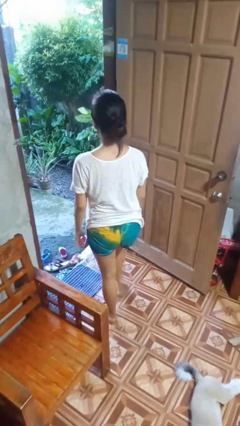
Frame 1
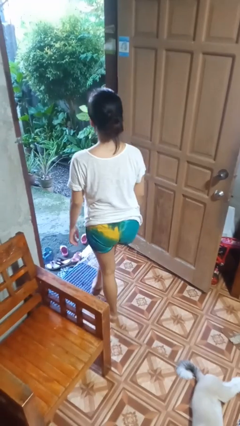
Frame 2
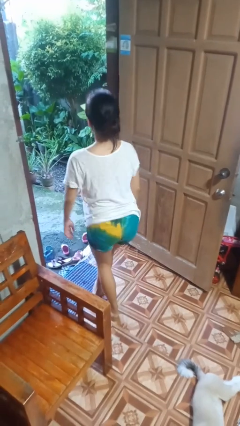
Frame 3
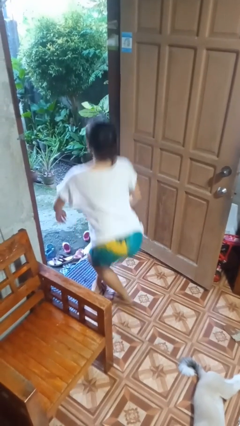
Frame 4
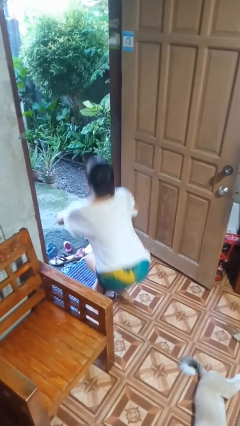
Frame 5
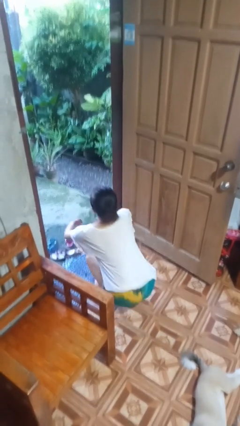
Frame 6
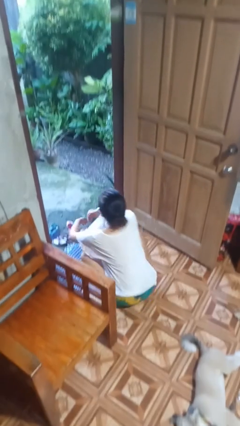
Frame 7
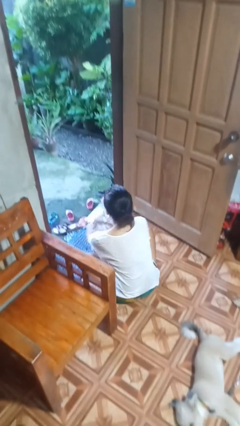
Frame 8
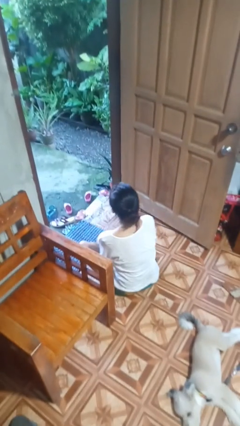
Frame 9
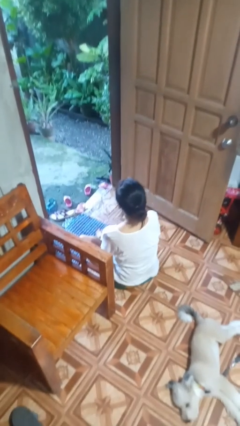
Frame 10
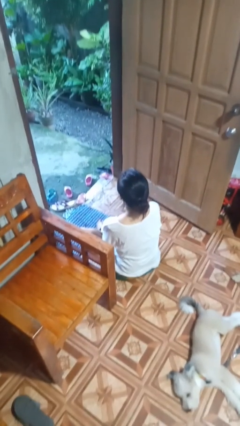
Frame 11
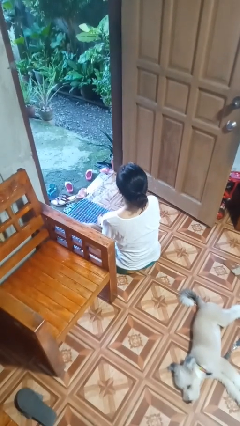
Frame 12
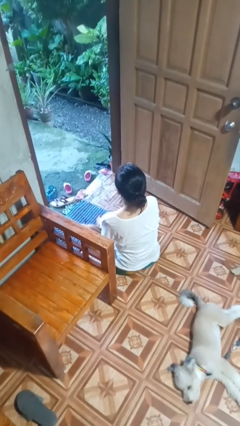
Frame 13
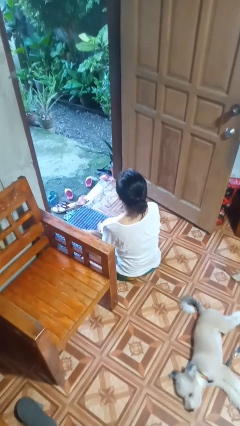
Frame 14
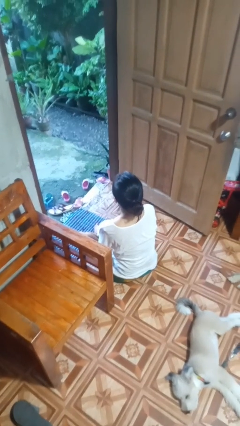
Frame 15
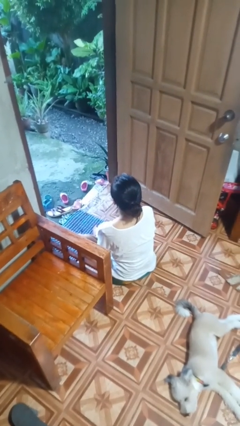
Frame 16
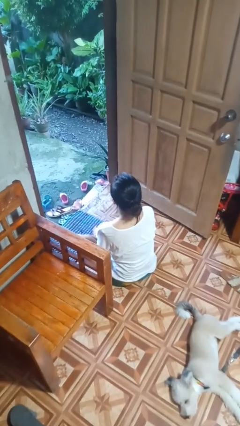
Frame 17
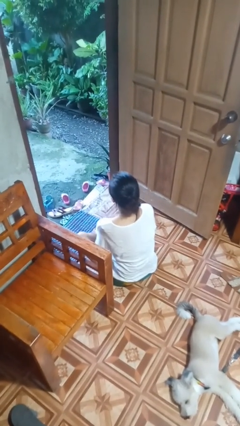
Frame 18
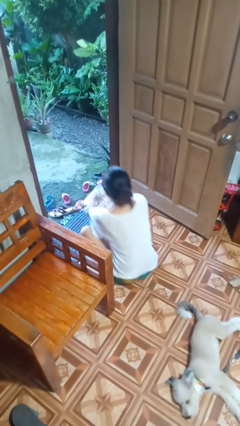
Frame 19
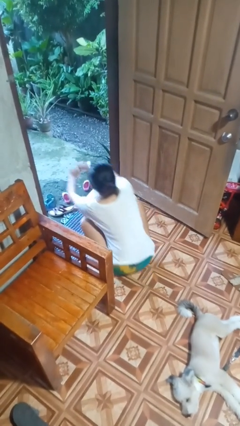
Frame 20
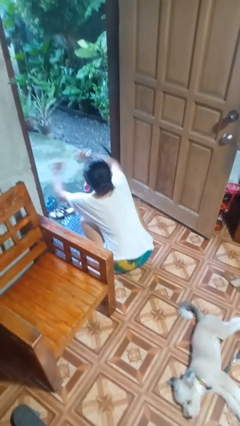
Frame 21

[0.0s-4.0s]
person sits crisscross

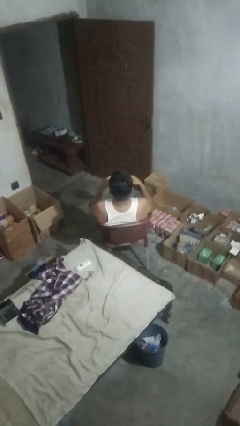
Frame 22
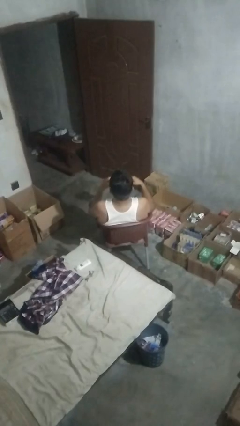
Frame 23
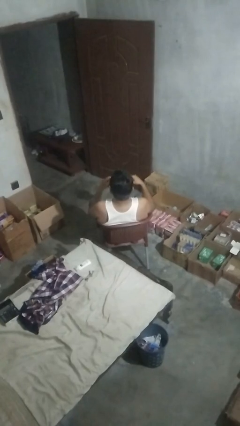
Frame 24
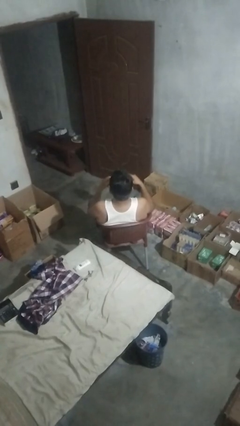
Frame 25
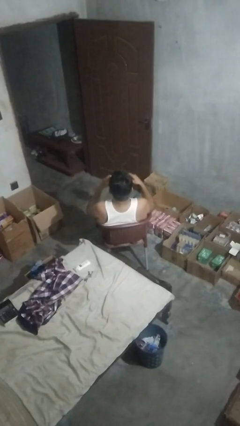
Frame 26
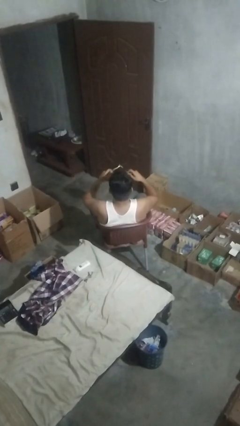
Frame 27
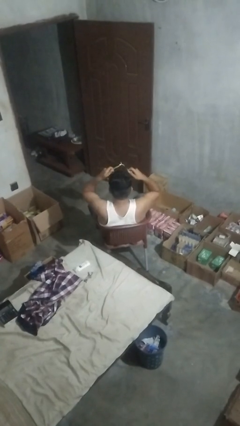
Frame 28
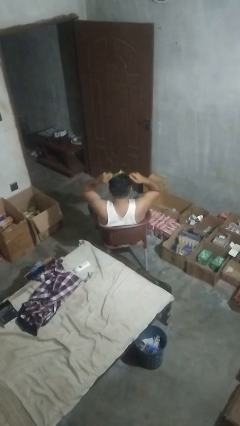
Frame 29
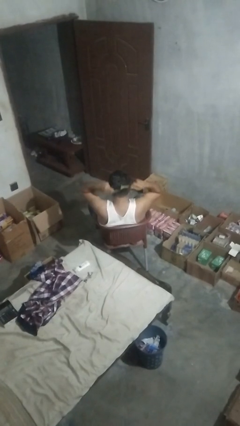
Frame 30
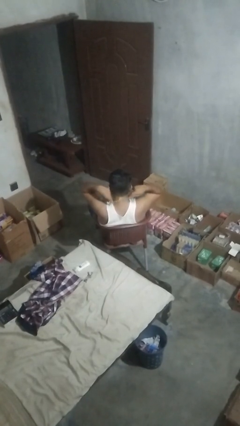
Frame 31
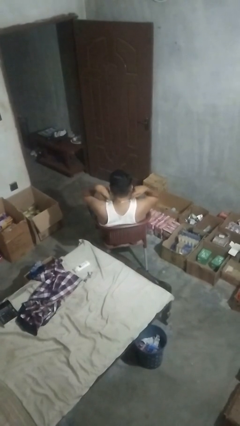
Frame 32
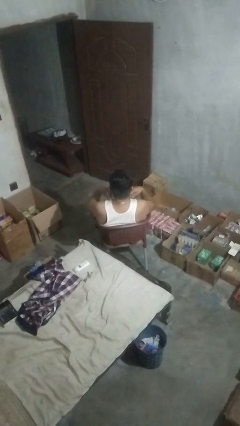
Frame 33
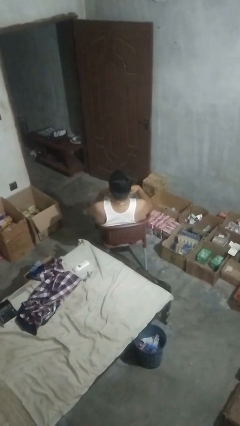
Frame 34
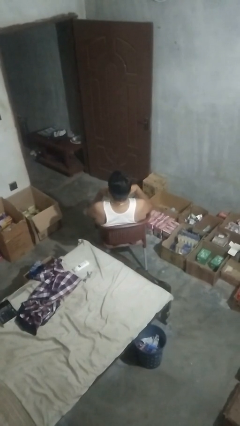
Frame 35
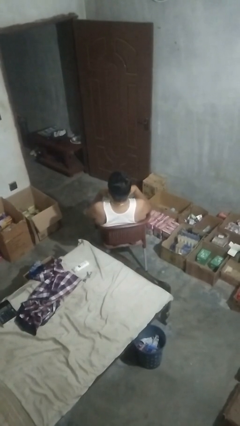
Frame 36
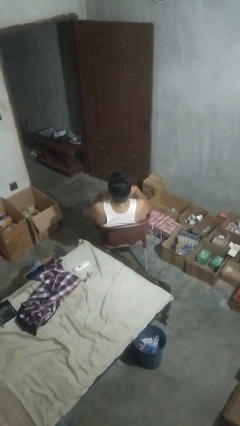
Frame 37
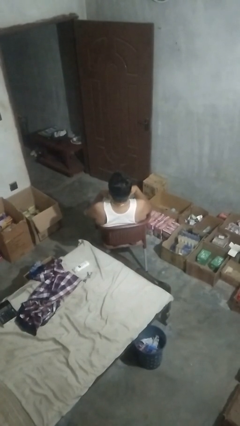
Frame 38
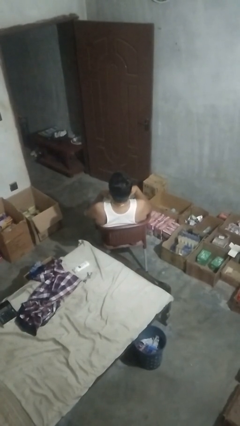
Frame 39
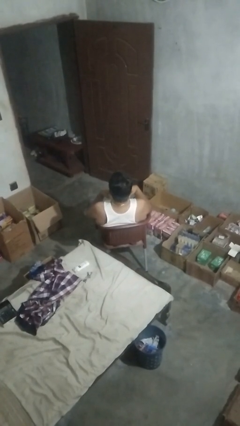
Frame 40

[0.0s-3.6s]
person puts on necklace

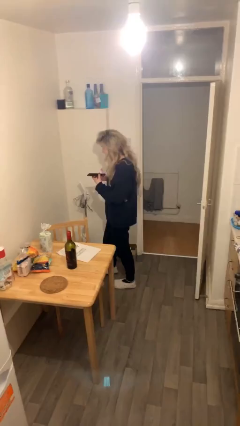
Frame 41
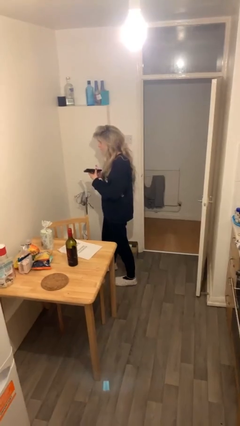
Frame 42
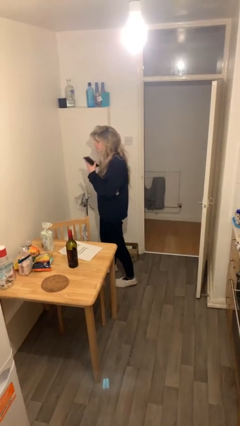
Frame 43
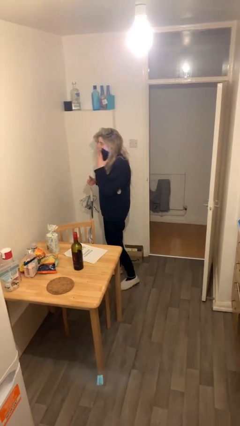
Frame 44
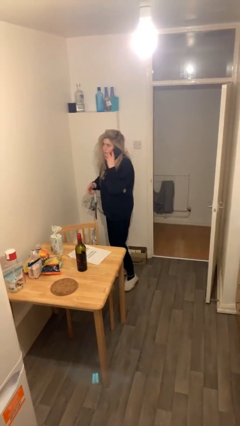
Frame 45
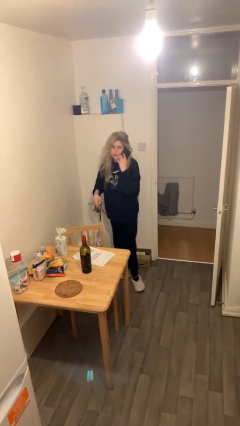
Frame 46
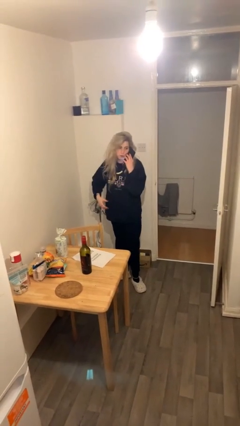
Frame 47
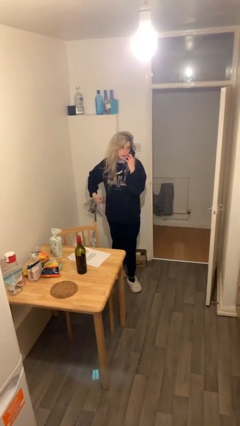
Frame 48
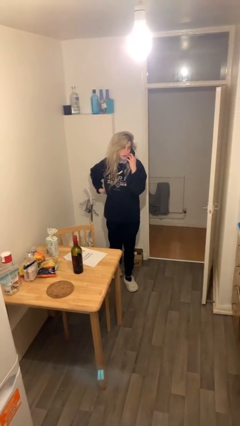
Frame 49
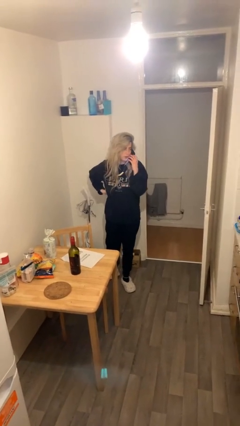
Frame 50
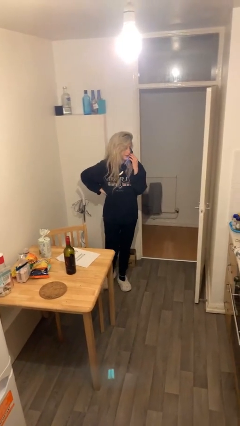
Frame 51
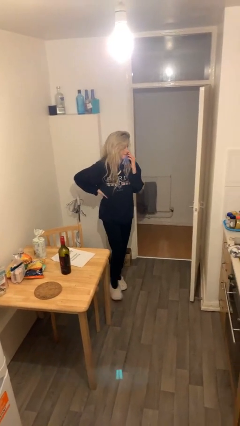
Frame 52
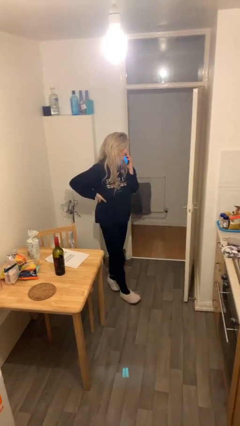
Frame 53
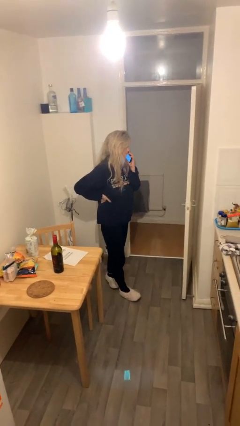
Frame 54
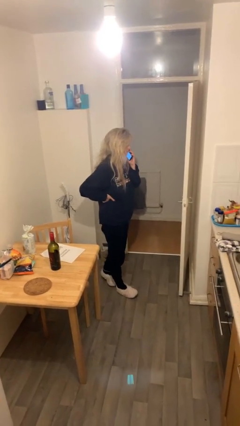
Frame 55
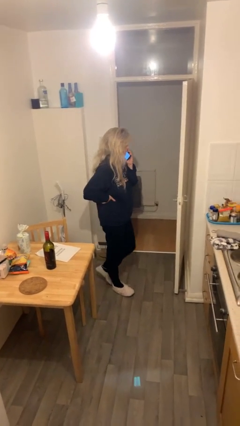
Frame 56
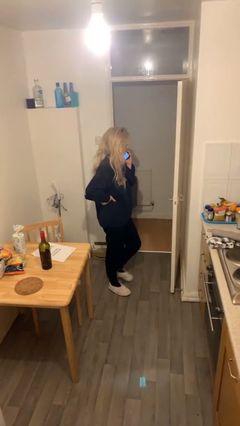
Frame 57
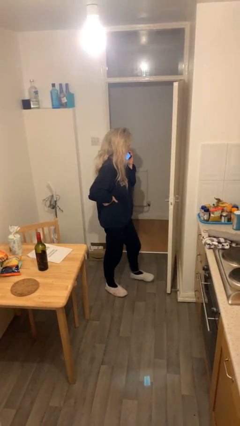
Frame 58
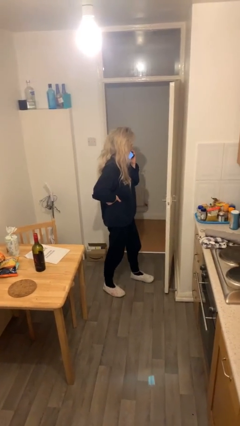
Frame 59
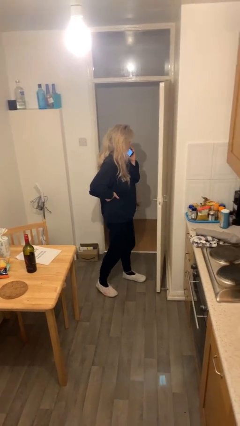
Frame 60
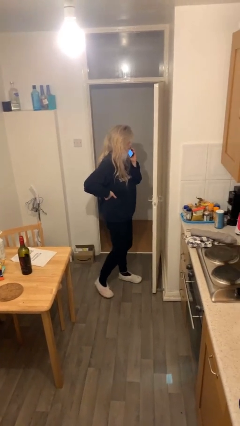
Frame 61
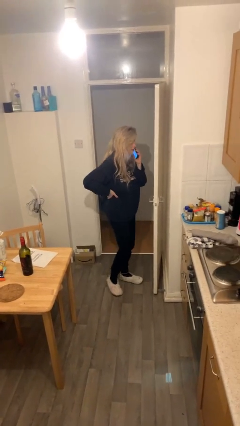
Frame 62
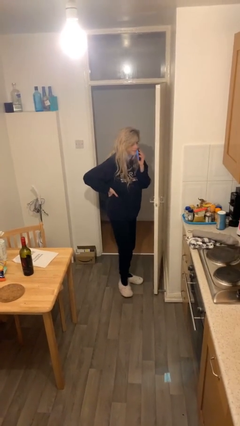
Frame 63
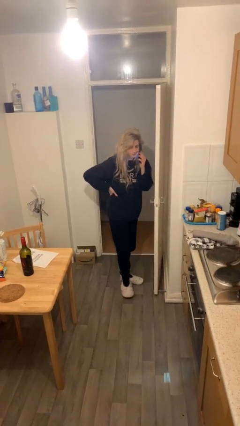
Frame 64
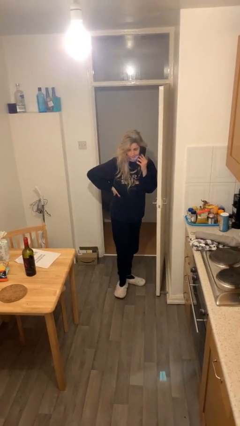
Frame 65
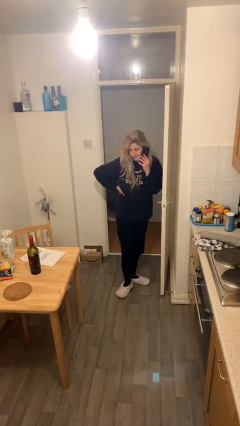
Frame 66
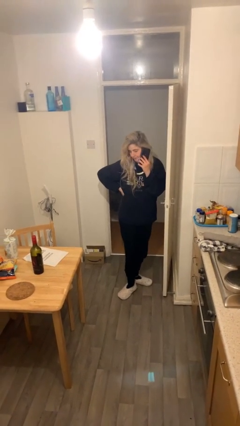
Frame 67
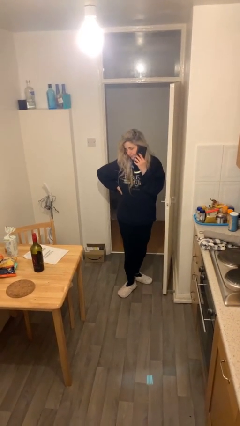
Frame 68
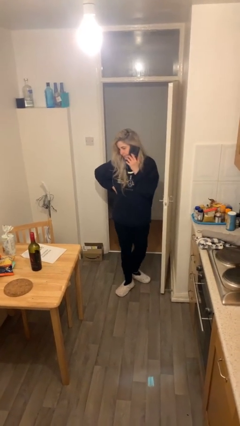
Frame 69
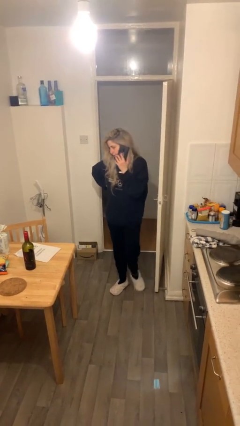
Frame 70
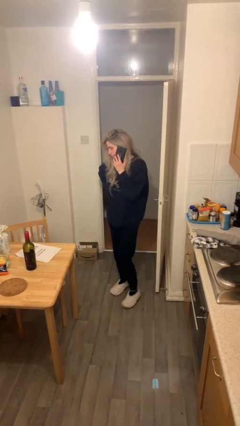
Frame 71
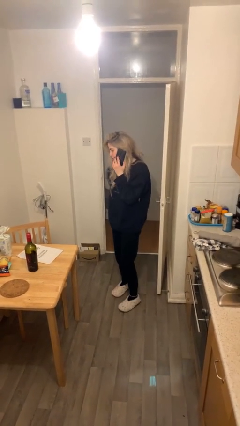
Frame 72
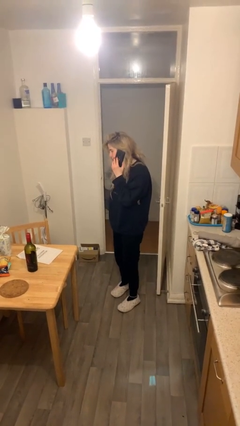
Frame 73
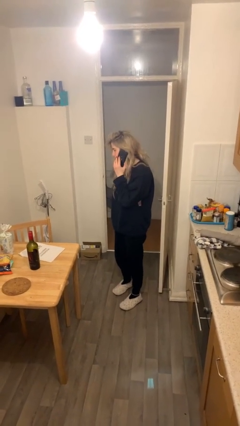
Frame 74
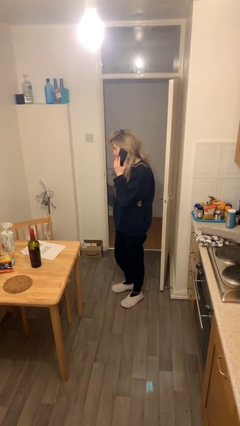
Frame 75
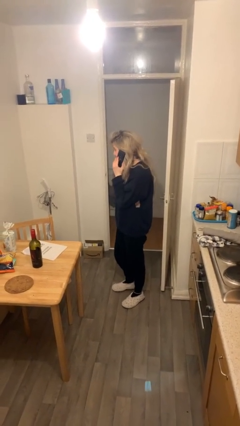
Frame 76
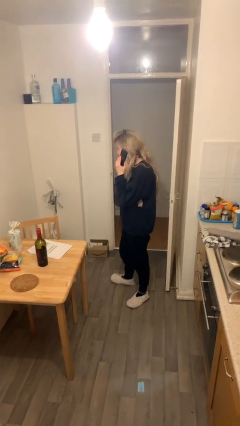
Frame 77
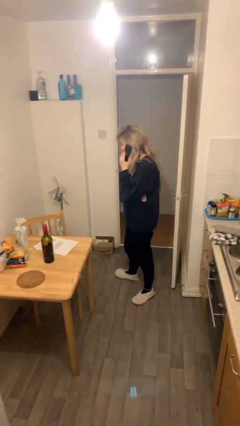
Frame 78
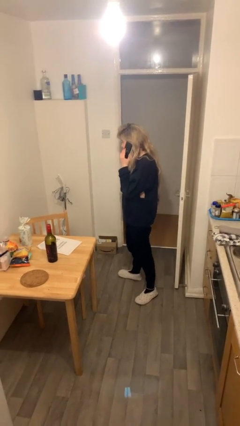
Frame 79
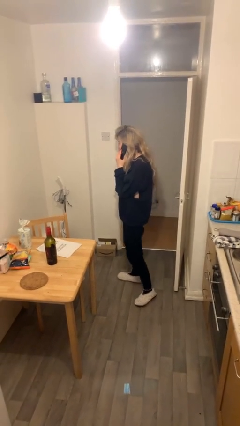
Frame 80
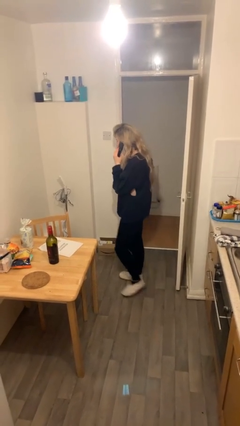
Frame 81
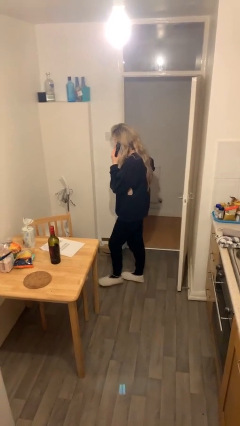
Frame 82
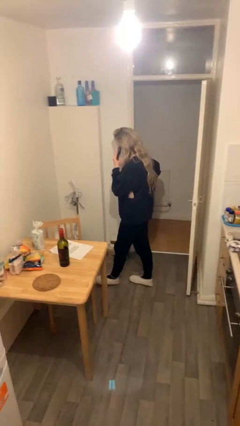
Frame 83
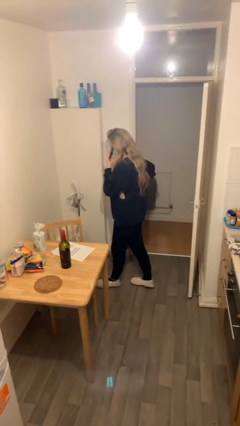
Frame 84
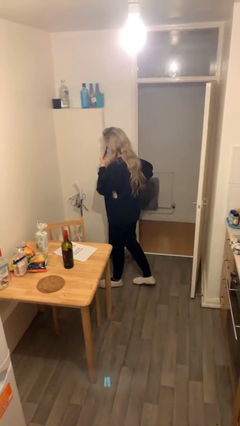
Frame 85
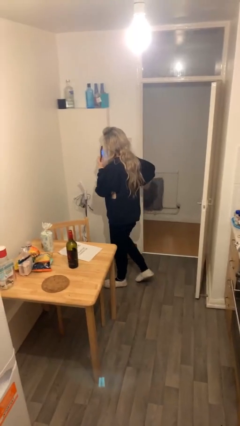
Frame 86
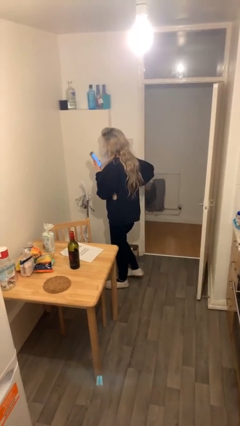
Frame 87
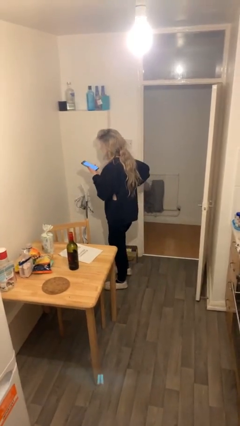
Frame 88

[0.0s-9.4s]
person talks on phone

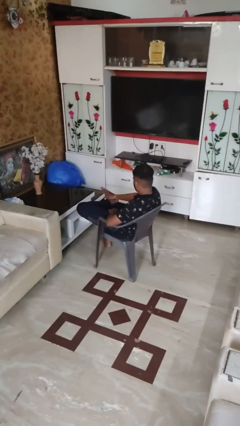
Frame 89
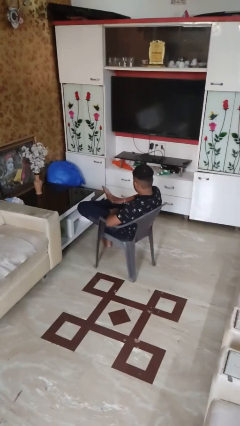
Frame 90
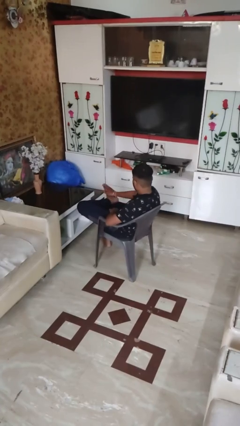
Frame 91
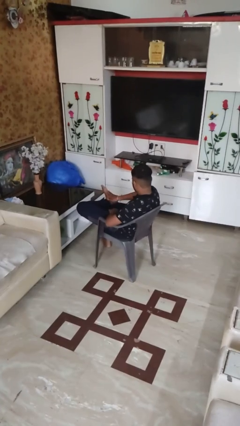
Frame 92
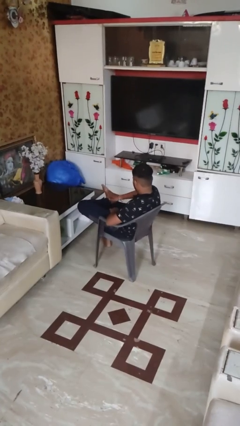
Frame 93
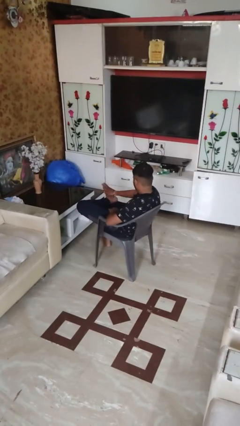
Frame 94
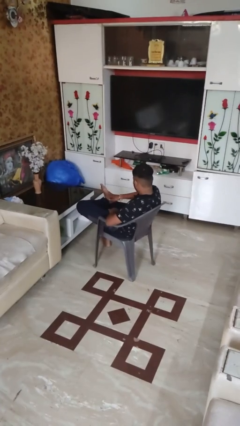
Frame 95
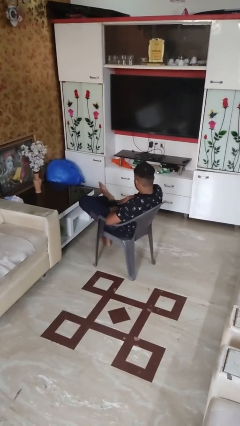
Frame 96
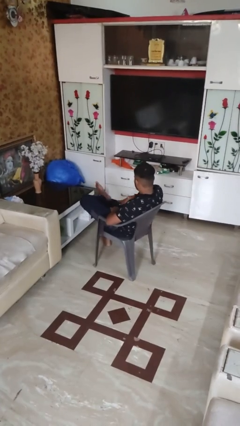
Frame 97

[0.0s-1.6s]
person rubs foot
